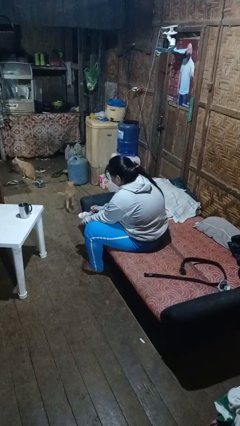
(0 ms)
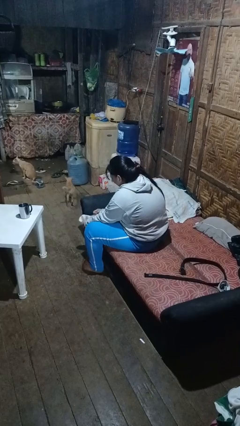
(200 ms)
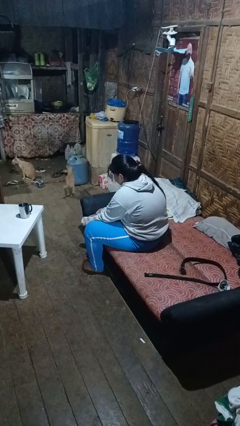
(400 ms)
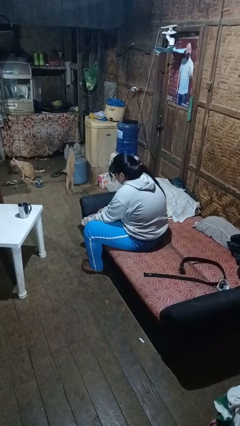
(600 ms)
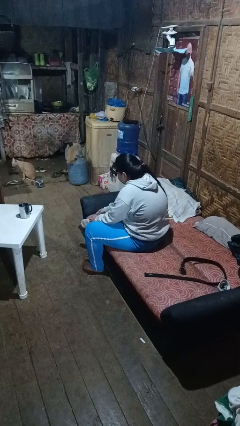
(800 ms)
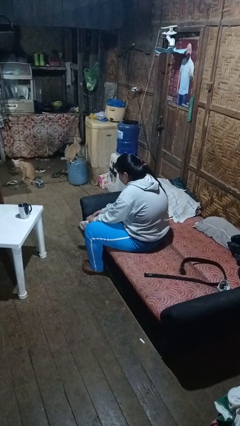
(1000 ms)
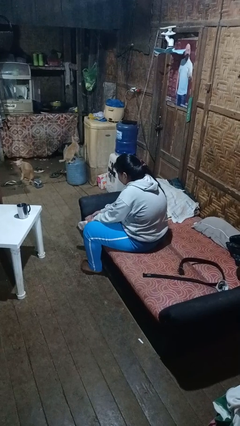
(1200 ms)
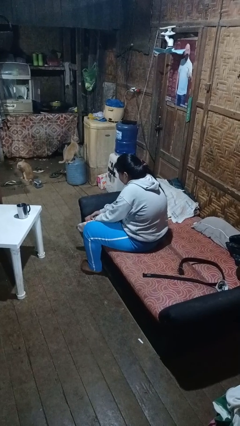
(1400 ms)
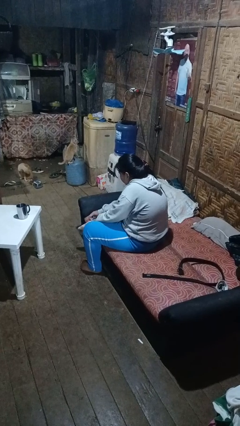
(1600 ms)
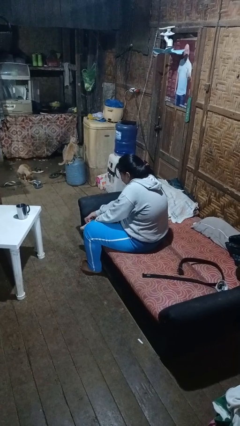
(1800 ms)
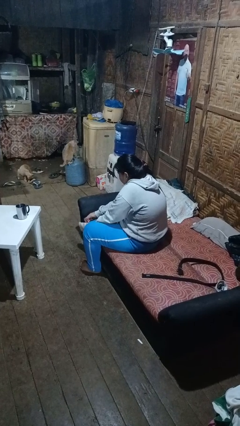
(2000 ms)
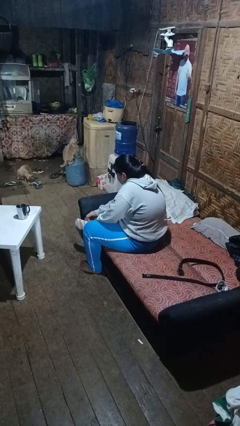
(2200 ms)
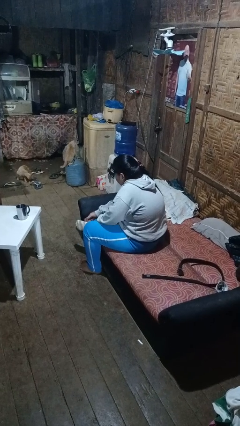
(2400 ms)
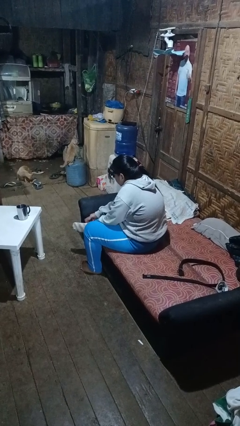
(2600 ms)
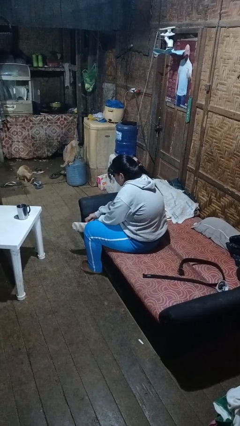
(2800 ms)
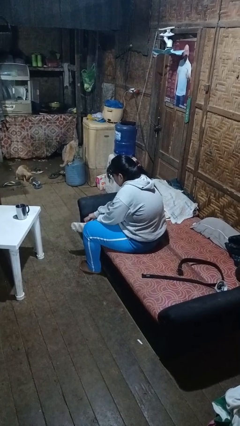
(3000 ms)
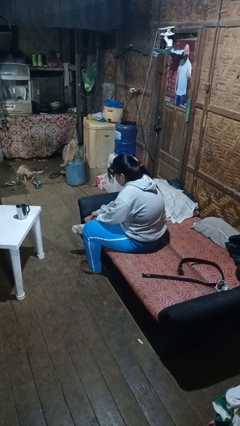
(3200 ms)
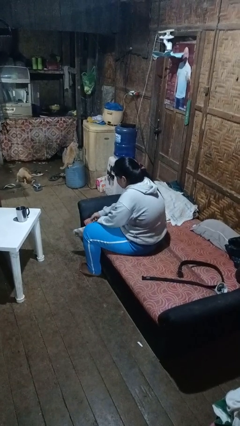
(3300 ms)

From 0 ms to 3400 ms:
person puts on socks

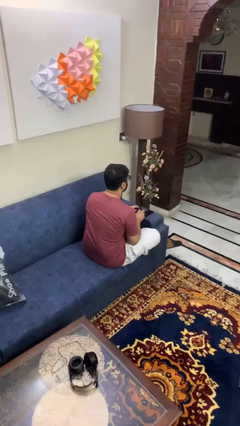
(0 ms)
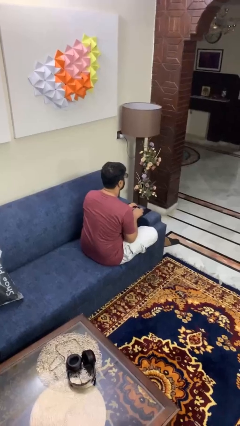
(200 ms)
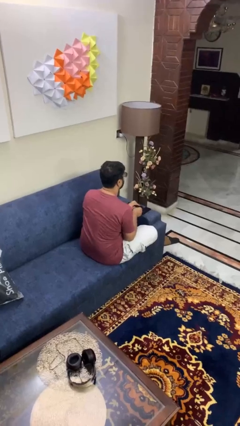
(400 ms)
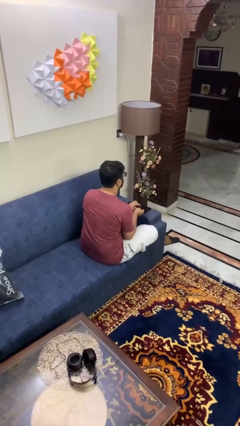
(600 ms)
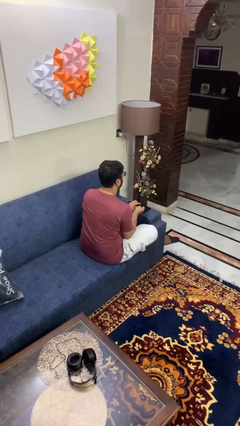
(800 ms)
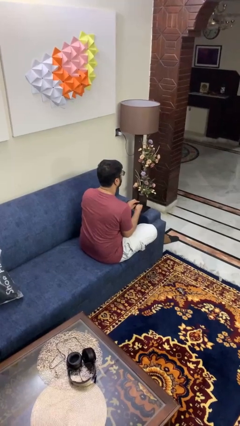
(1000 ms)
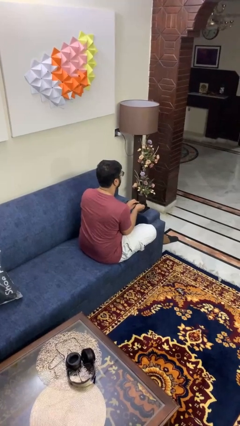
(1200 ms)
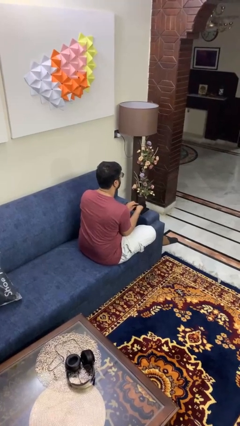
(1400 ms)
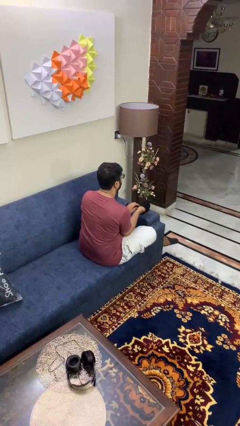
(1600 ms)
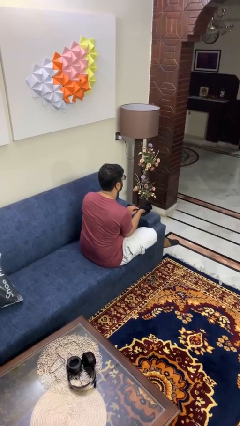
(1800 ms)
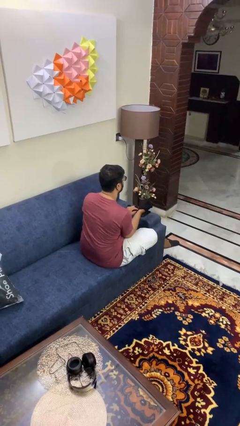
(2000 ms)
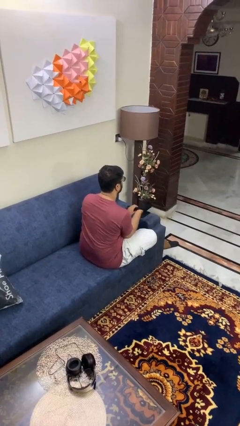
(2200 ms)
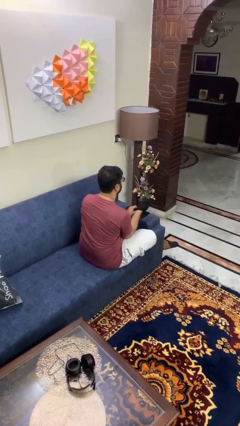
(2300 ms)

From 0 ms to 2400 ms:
person puts on gloves

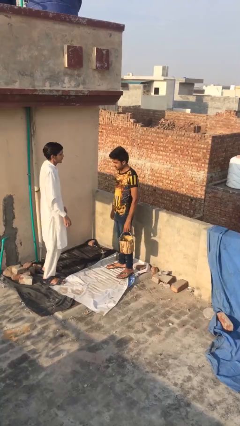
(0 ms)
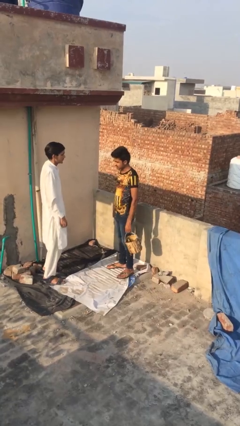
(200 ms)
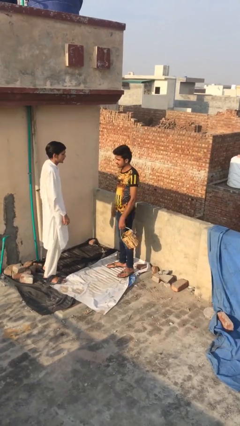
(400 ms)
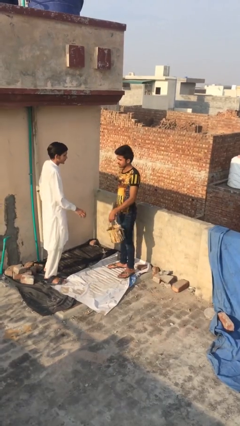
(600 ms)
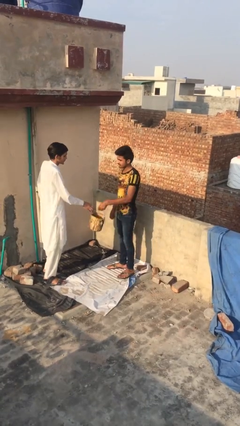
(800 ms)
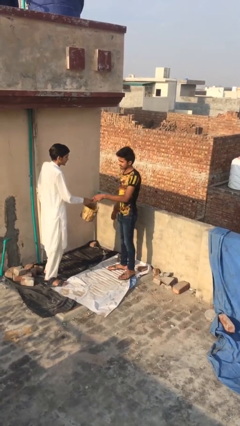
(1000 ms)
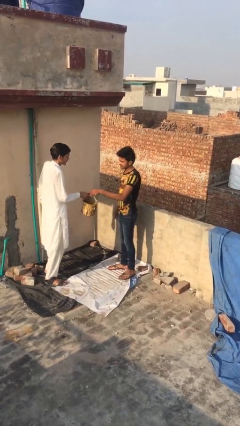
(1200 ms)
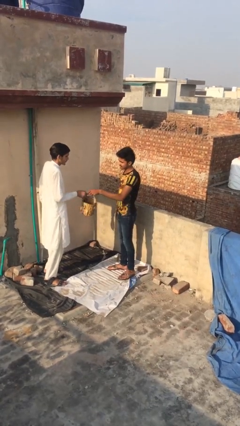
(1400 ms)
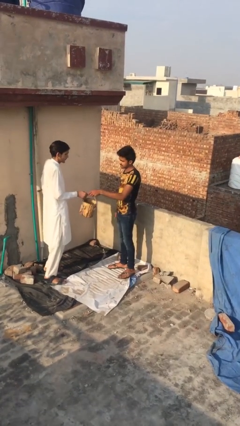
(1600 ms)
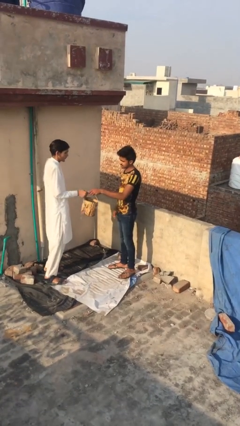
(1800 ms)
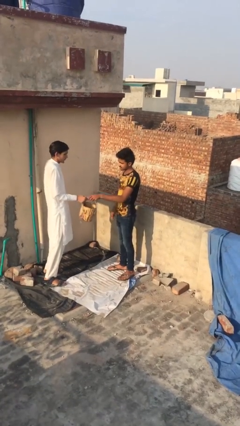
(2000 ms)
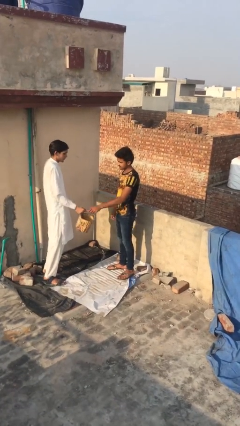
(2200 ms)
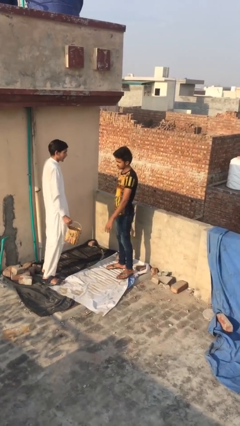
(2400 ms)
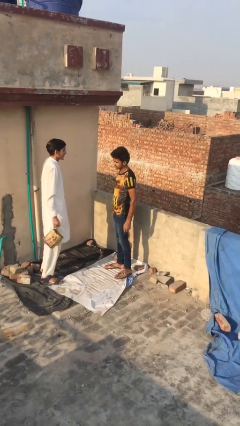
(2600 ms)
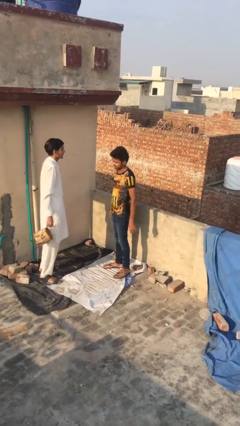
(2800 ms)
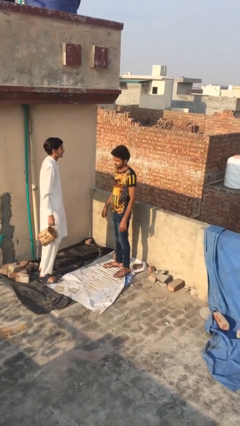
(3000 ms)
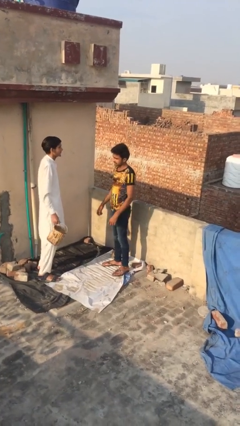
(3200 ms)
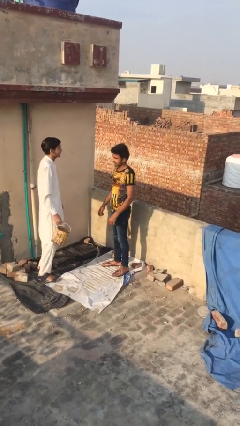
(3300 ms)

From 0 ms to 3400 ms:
person transfers object to person

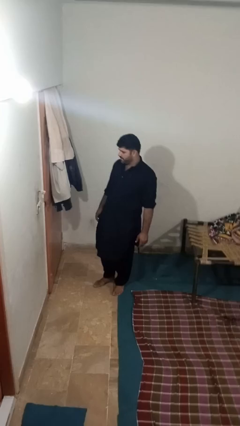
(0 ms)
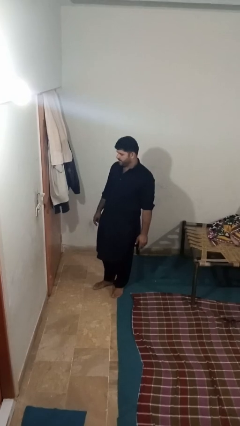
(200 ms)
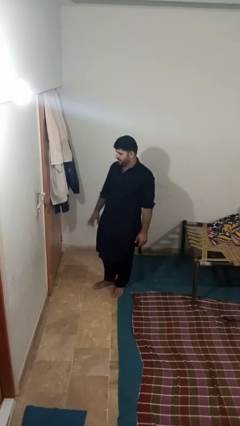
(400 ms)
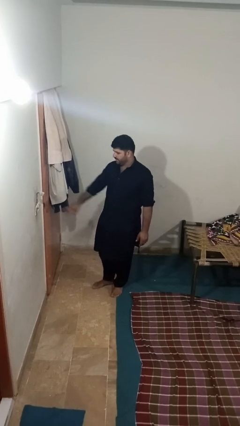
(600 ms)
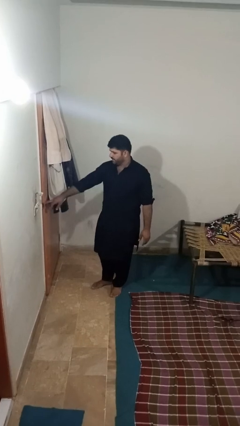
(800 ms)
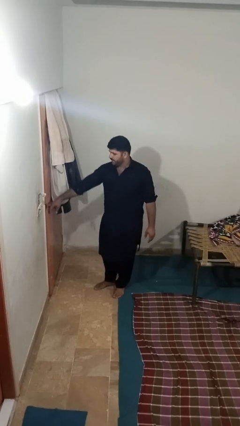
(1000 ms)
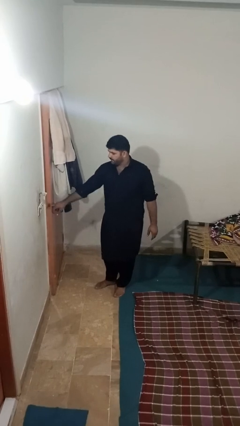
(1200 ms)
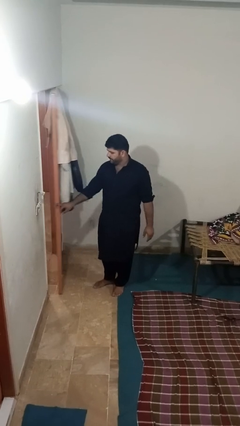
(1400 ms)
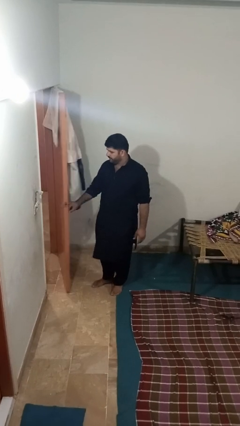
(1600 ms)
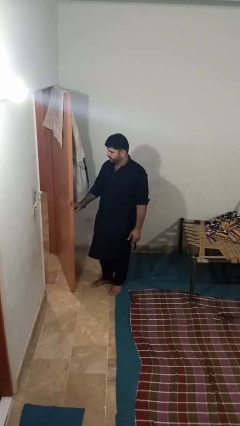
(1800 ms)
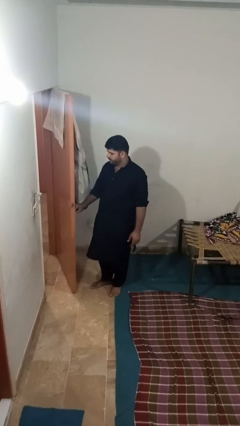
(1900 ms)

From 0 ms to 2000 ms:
person opens facility door

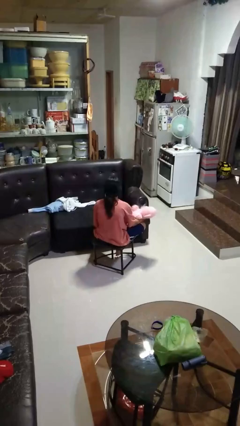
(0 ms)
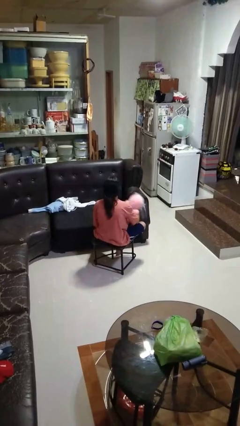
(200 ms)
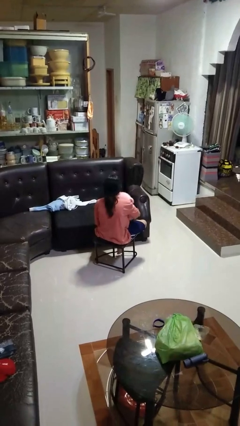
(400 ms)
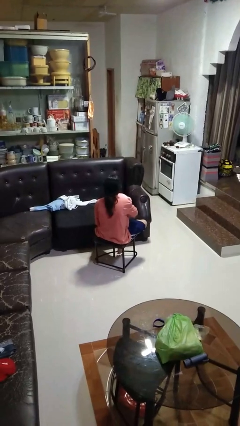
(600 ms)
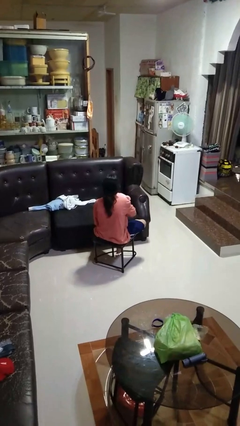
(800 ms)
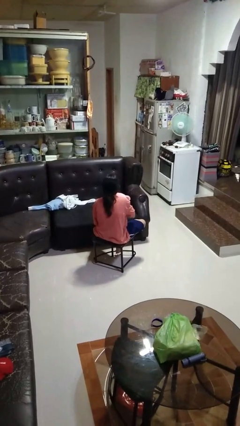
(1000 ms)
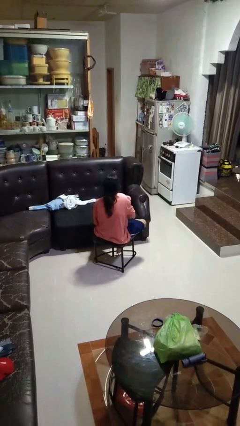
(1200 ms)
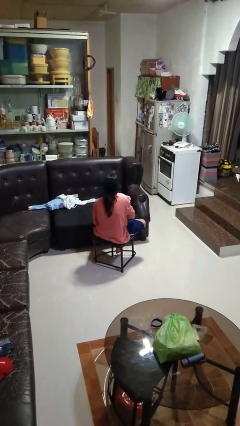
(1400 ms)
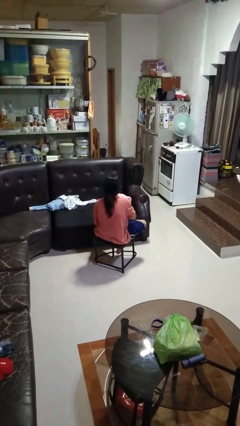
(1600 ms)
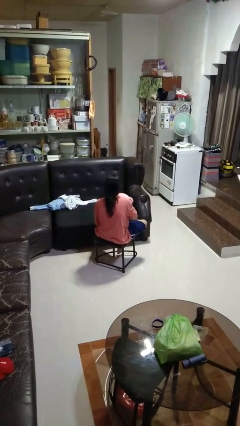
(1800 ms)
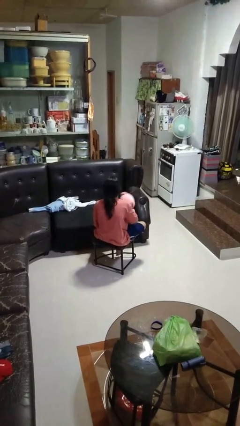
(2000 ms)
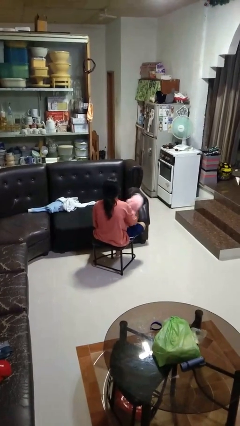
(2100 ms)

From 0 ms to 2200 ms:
person hugs stuffed animal

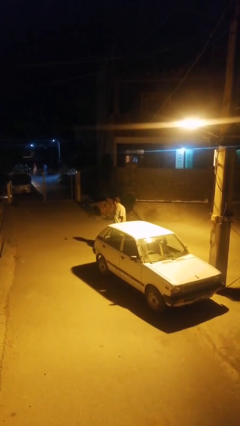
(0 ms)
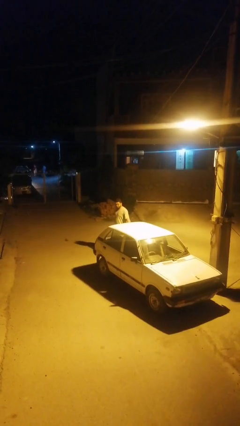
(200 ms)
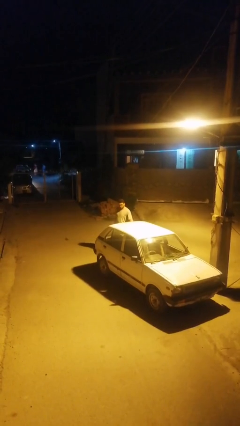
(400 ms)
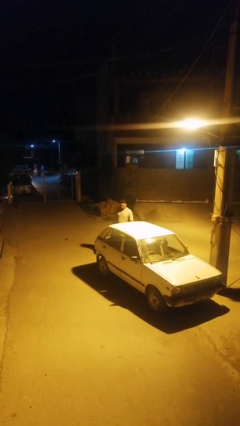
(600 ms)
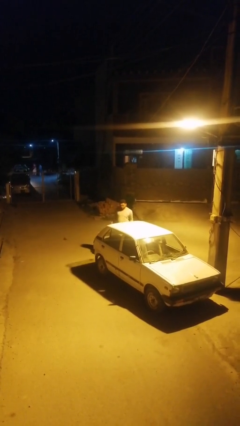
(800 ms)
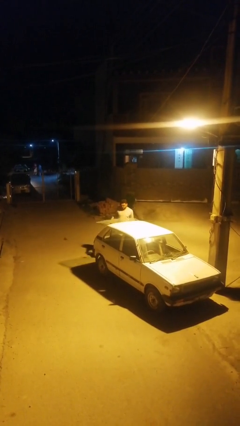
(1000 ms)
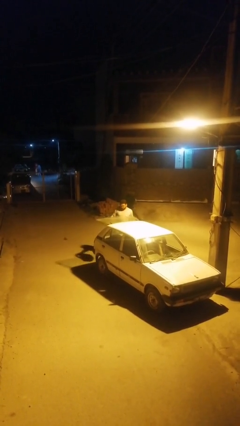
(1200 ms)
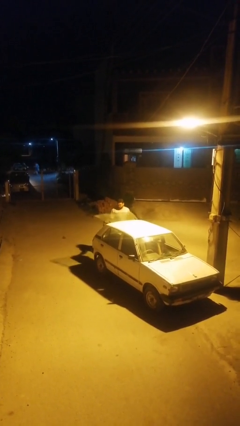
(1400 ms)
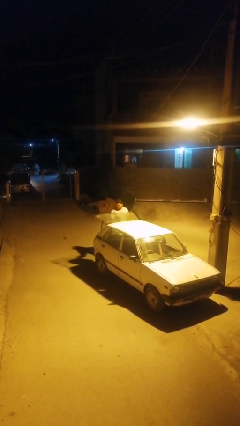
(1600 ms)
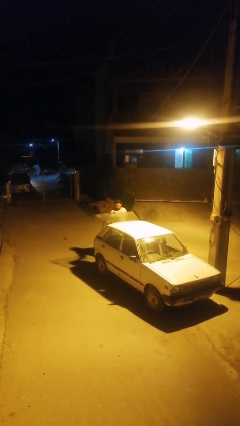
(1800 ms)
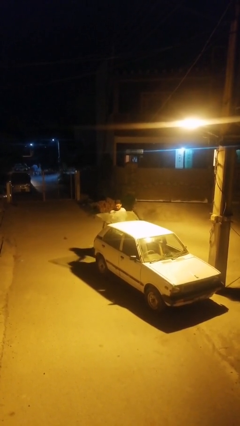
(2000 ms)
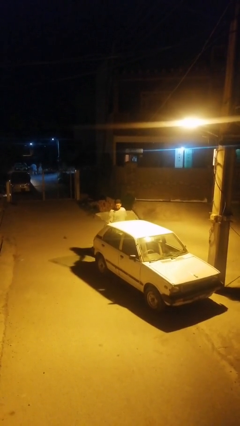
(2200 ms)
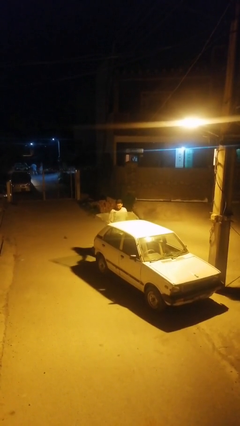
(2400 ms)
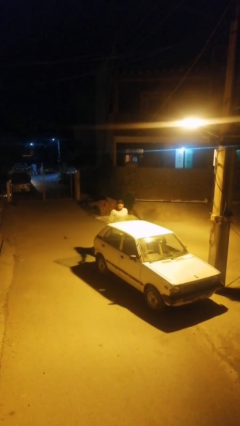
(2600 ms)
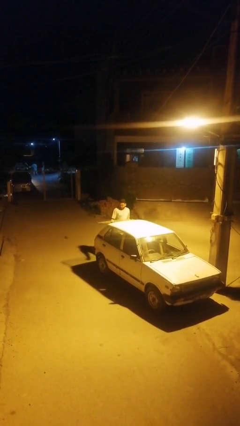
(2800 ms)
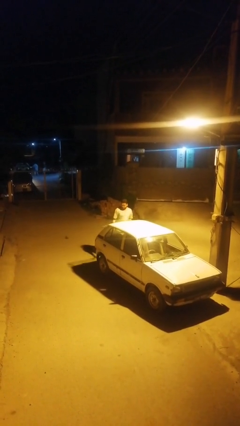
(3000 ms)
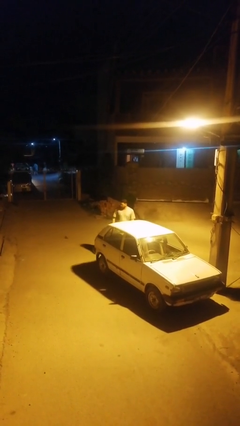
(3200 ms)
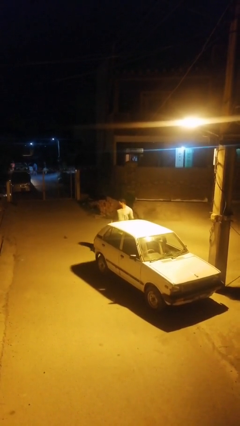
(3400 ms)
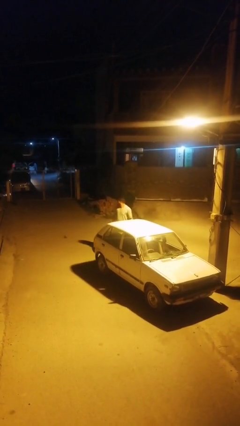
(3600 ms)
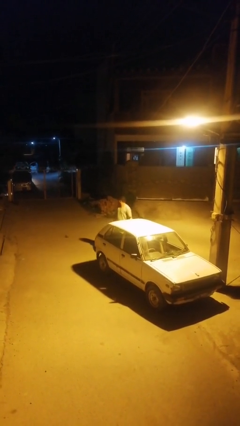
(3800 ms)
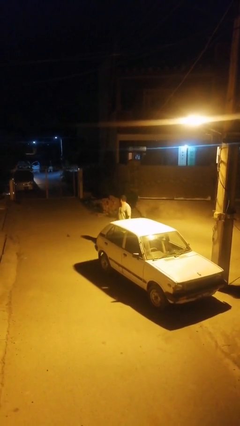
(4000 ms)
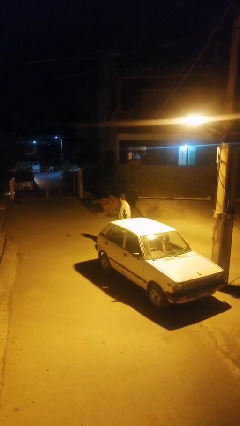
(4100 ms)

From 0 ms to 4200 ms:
person loads car

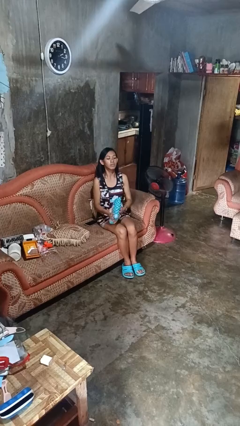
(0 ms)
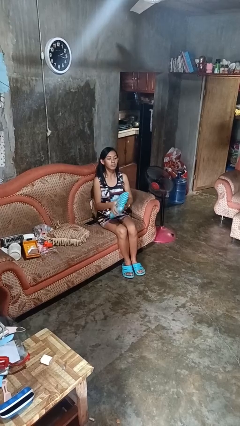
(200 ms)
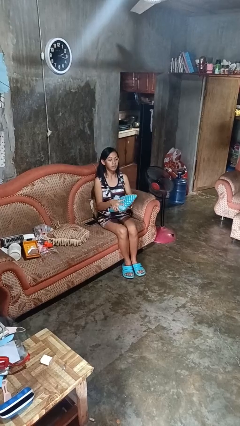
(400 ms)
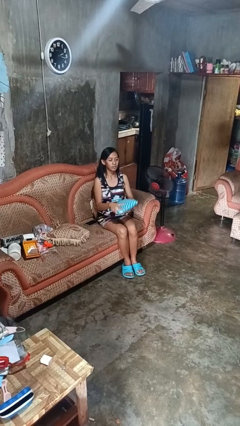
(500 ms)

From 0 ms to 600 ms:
person catches dropped object
